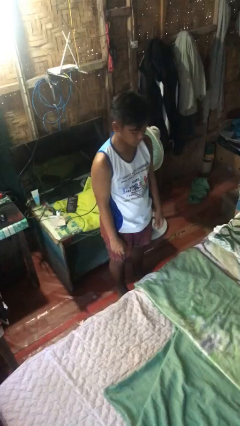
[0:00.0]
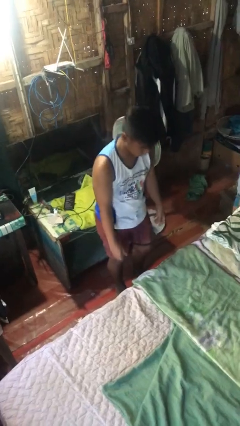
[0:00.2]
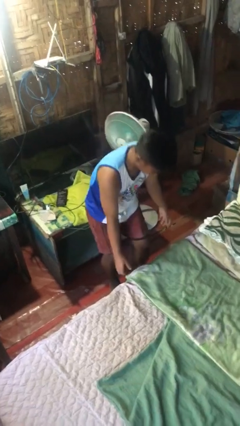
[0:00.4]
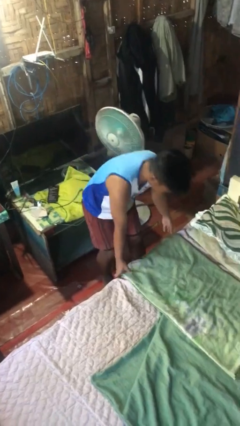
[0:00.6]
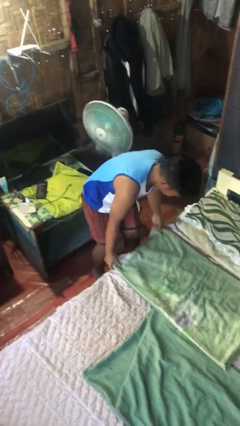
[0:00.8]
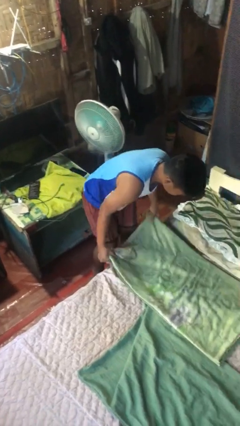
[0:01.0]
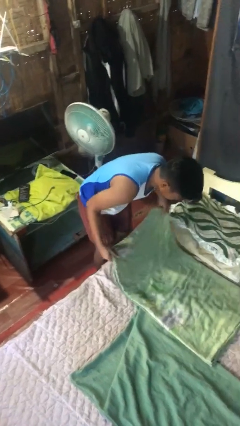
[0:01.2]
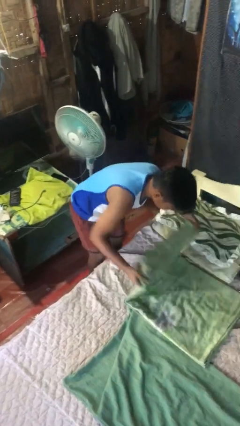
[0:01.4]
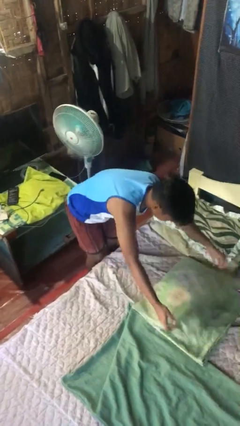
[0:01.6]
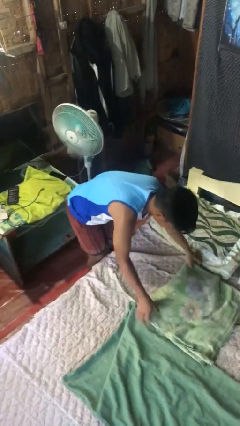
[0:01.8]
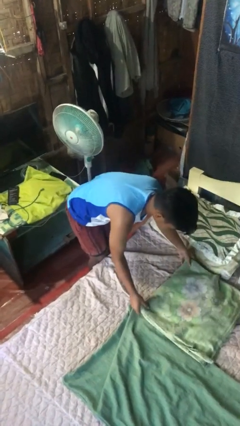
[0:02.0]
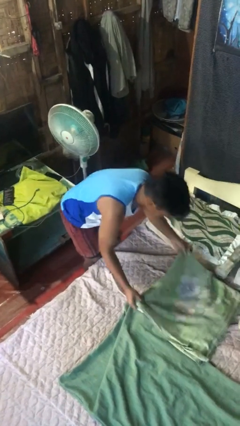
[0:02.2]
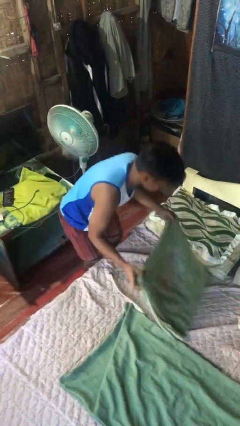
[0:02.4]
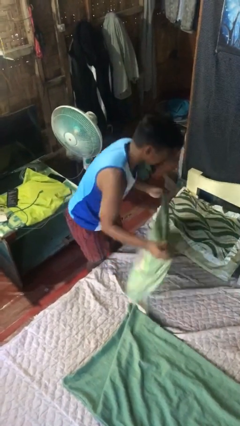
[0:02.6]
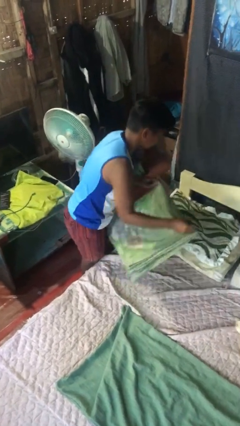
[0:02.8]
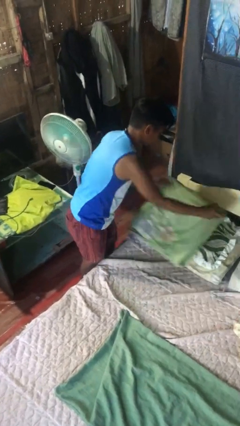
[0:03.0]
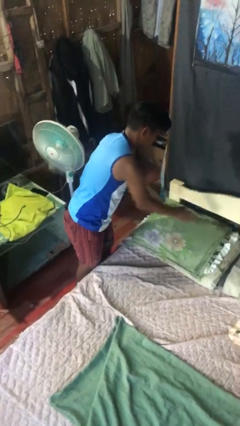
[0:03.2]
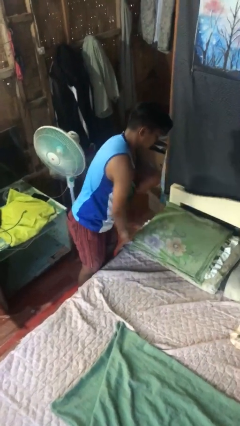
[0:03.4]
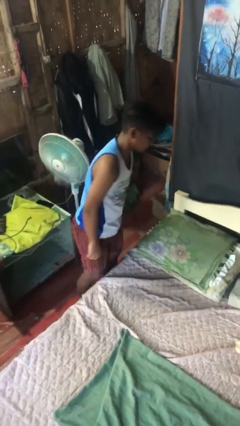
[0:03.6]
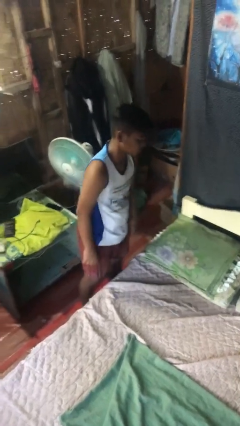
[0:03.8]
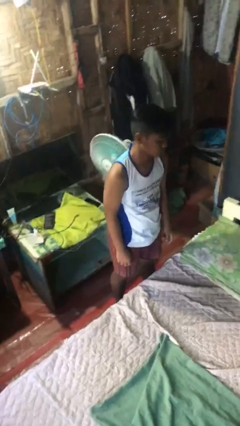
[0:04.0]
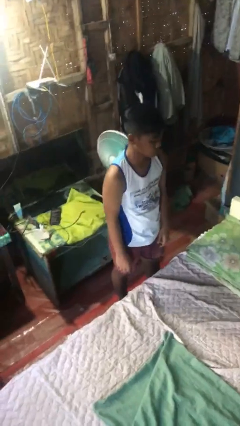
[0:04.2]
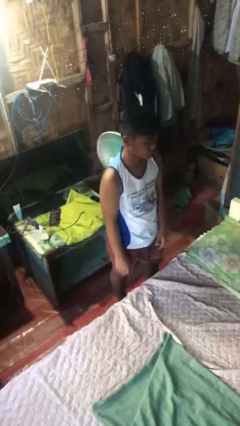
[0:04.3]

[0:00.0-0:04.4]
person makes bed

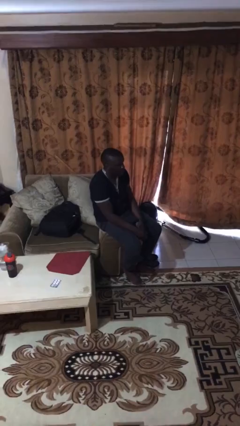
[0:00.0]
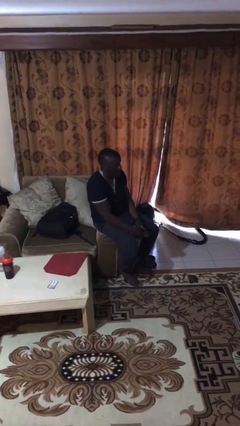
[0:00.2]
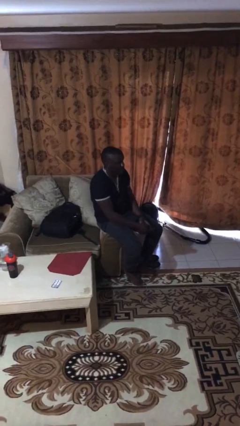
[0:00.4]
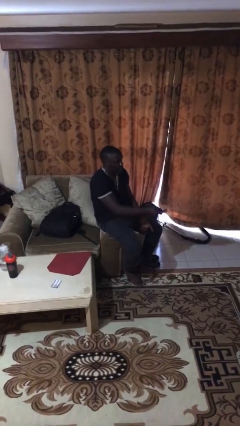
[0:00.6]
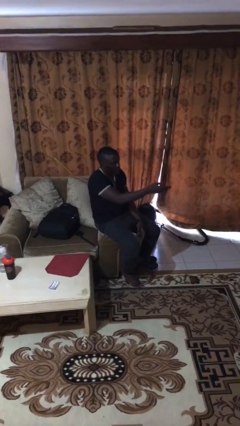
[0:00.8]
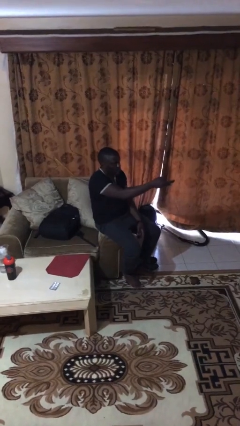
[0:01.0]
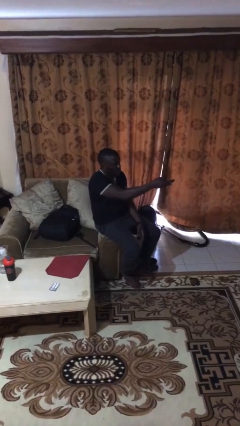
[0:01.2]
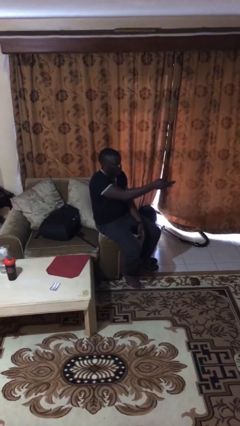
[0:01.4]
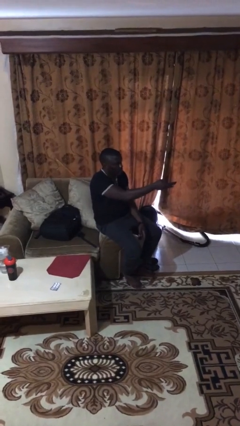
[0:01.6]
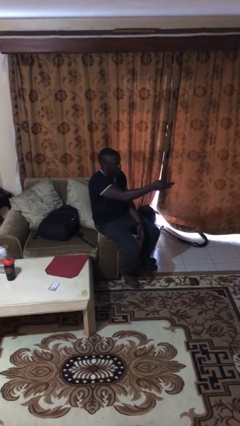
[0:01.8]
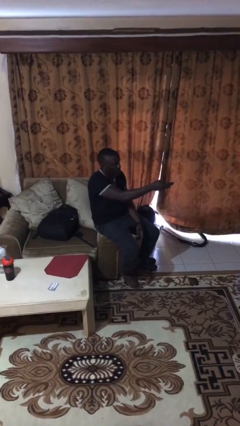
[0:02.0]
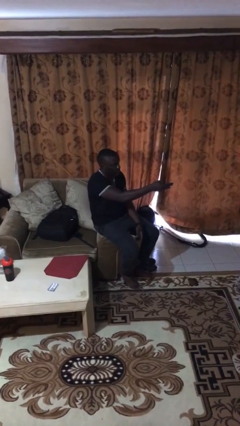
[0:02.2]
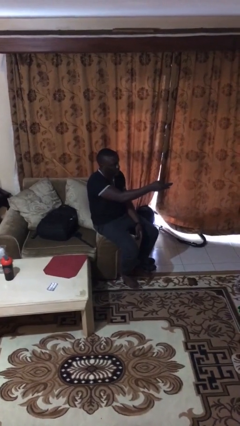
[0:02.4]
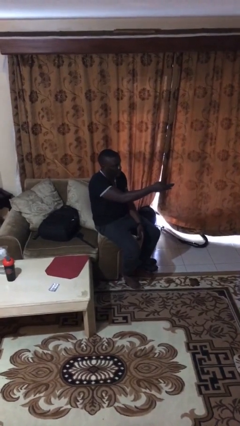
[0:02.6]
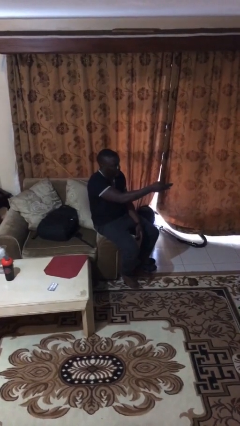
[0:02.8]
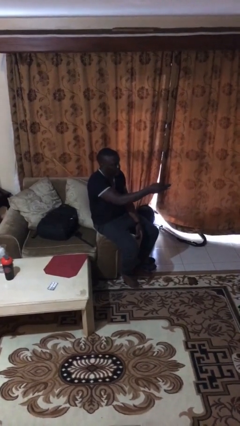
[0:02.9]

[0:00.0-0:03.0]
person uses television remote

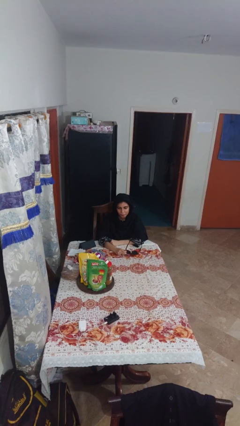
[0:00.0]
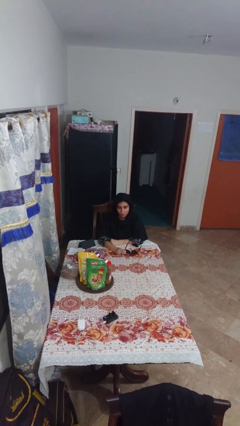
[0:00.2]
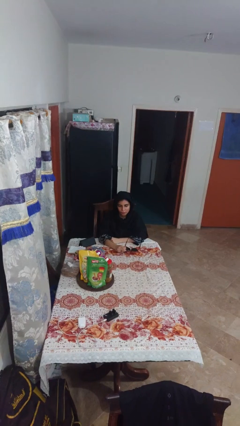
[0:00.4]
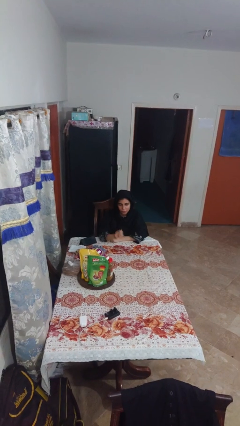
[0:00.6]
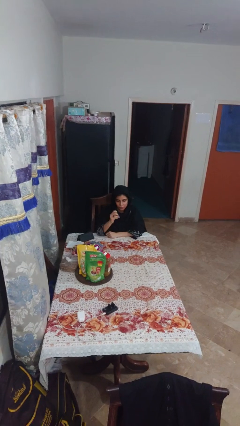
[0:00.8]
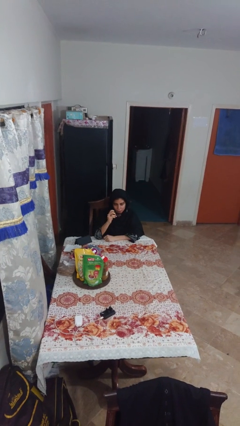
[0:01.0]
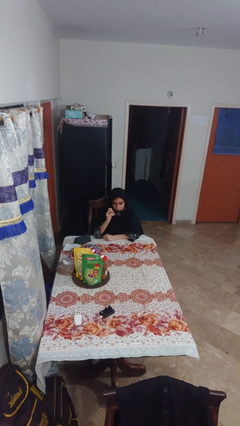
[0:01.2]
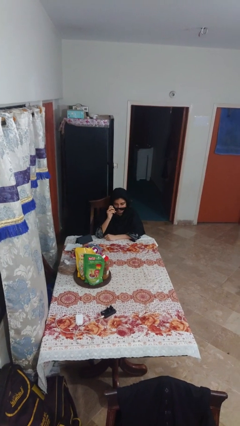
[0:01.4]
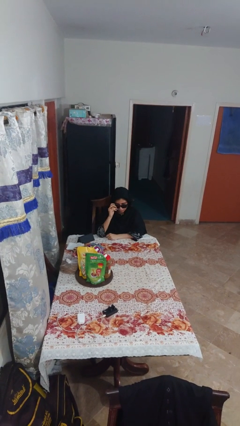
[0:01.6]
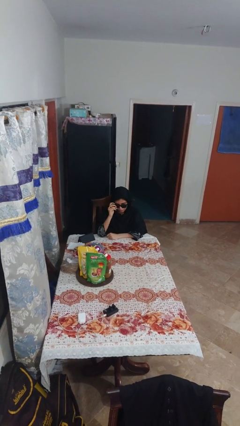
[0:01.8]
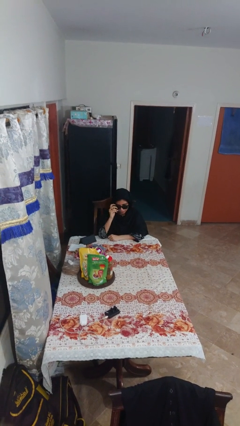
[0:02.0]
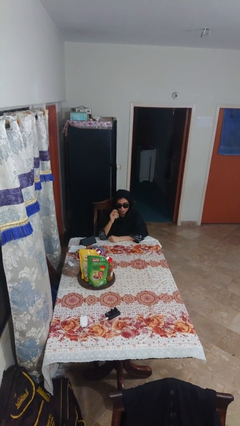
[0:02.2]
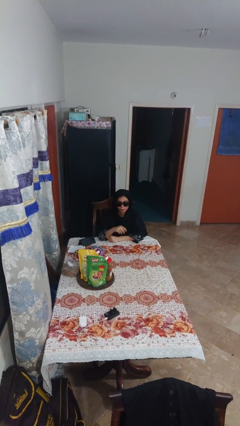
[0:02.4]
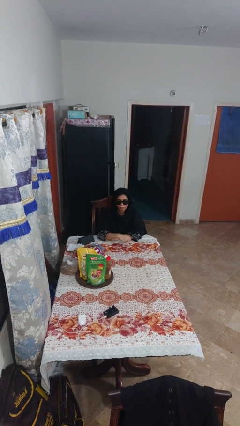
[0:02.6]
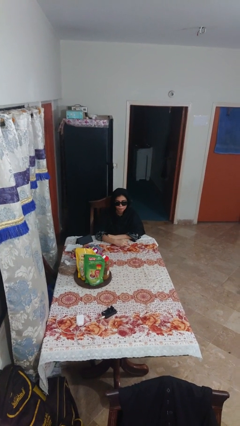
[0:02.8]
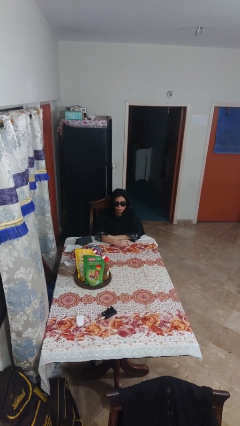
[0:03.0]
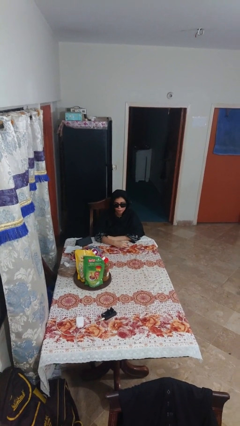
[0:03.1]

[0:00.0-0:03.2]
person puts on sunglasses

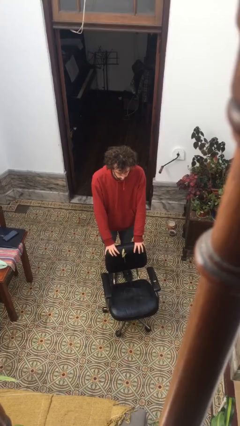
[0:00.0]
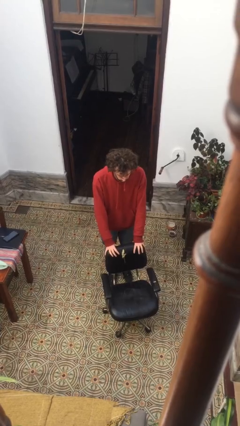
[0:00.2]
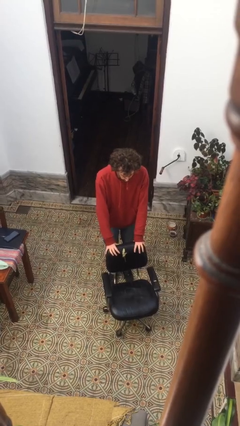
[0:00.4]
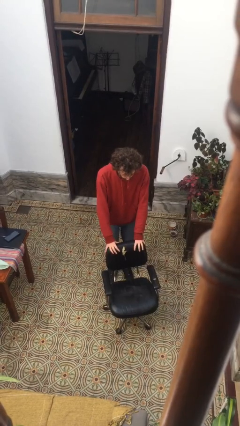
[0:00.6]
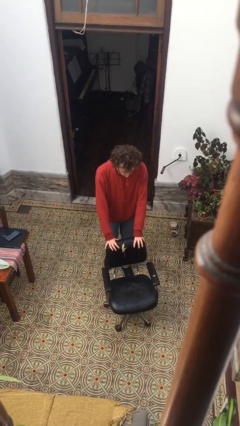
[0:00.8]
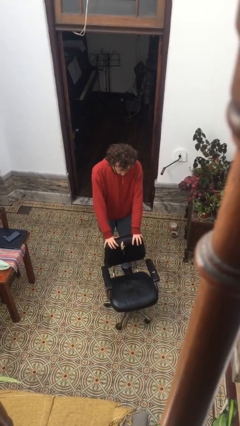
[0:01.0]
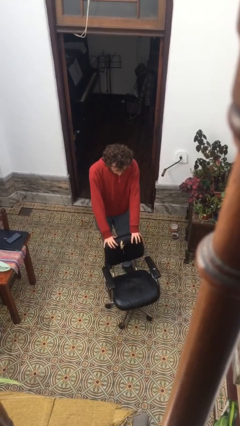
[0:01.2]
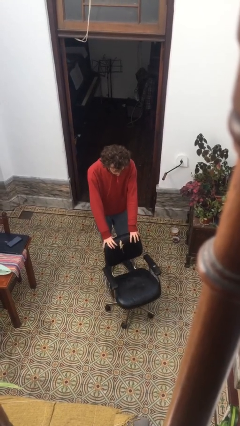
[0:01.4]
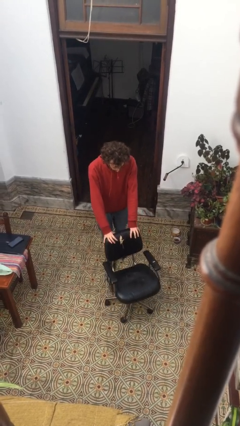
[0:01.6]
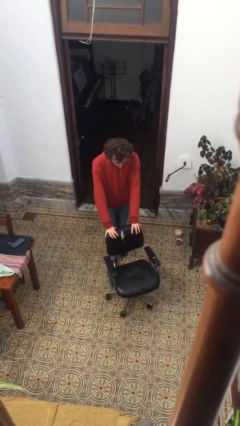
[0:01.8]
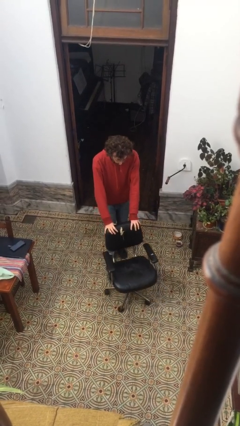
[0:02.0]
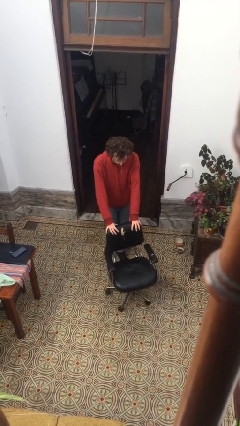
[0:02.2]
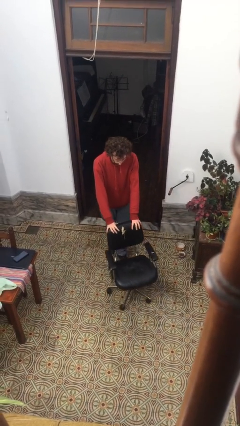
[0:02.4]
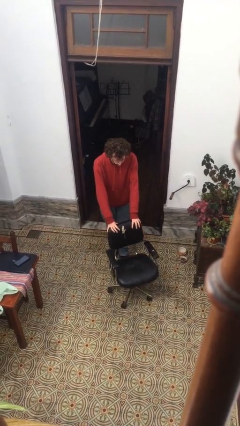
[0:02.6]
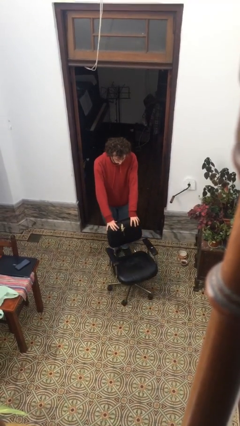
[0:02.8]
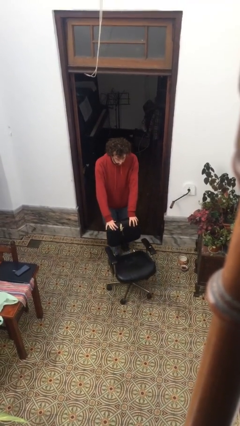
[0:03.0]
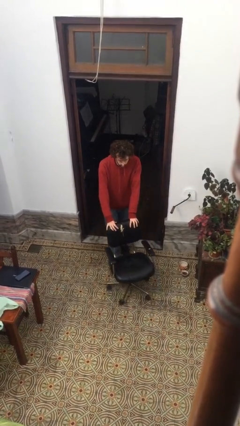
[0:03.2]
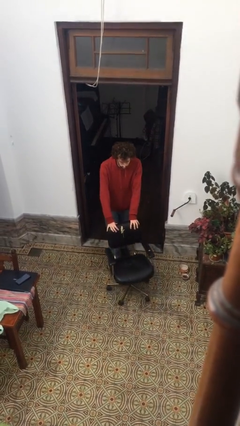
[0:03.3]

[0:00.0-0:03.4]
person pulls wheeled cart

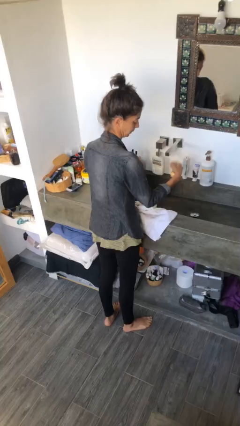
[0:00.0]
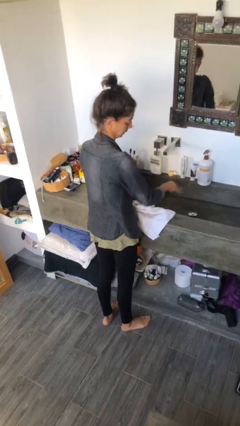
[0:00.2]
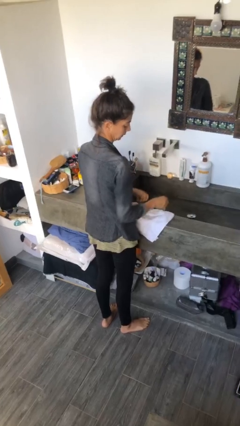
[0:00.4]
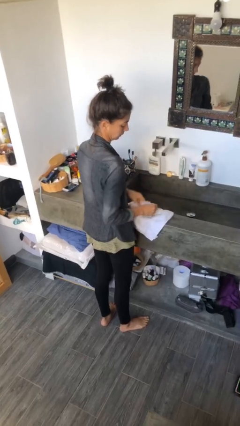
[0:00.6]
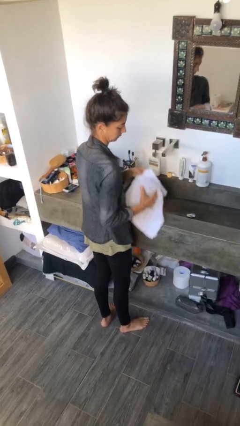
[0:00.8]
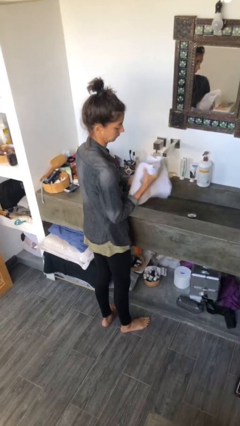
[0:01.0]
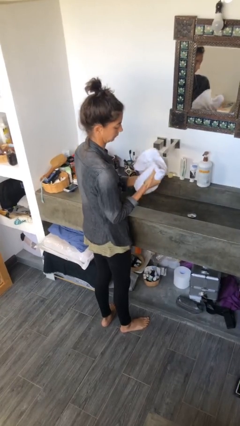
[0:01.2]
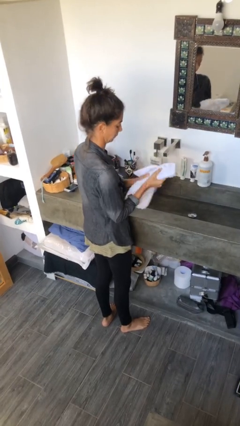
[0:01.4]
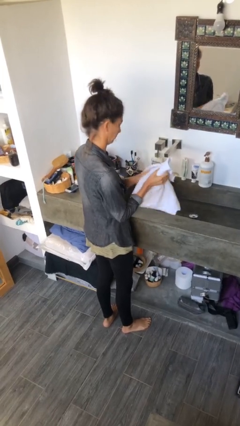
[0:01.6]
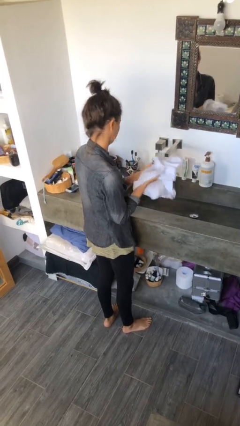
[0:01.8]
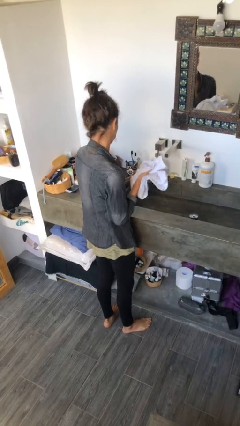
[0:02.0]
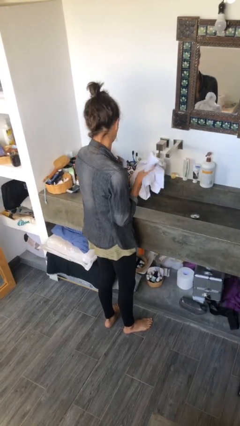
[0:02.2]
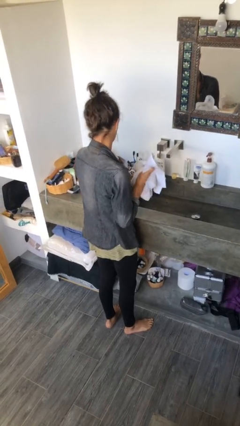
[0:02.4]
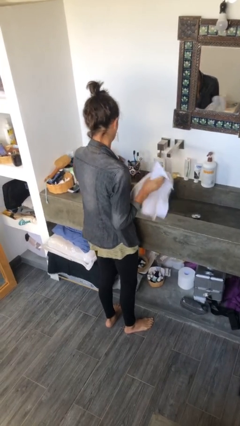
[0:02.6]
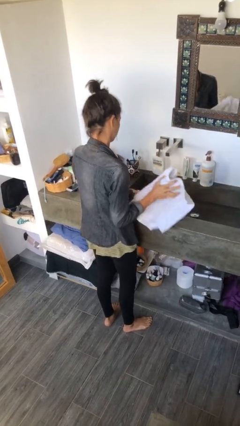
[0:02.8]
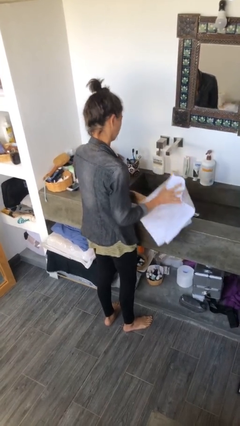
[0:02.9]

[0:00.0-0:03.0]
person dries hands with towel

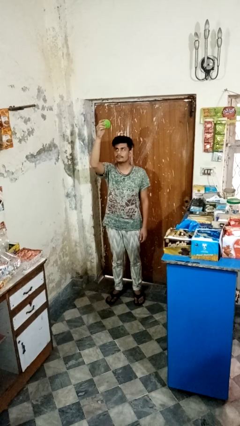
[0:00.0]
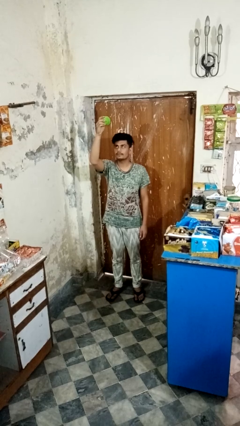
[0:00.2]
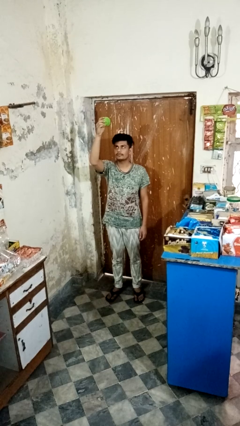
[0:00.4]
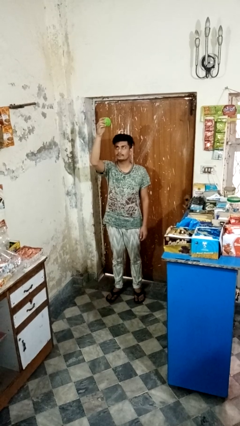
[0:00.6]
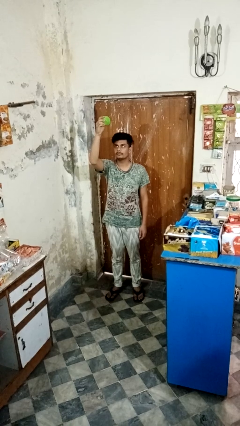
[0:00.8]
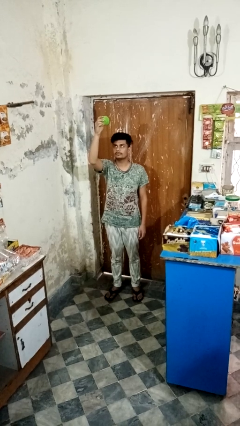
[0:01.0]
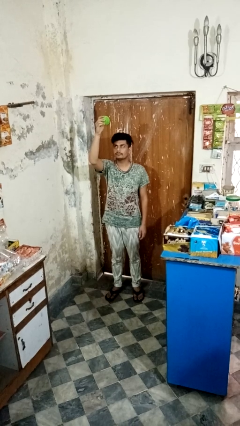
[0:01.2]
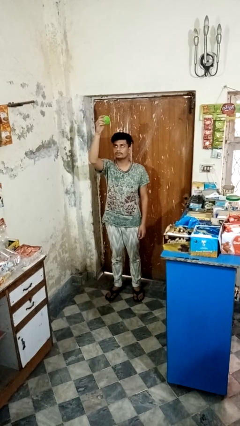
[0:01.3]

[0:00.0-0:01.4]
person drops object
